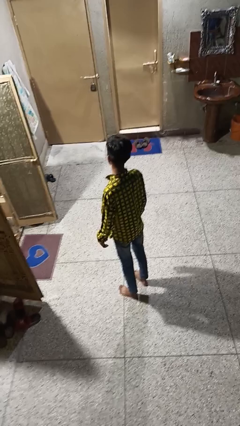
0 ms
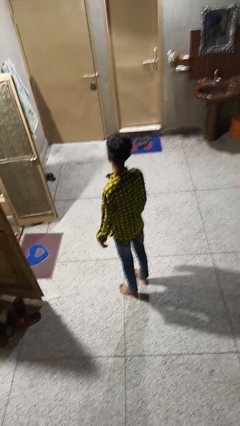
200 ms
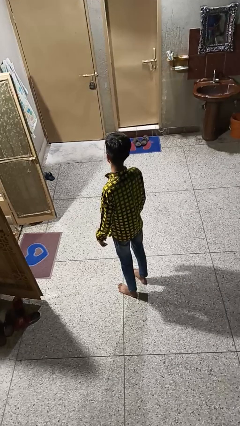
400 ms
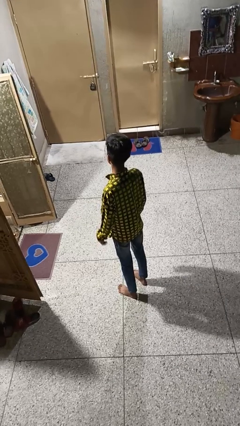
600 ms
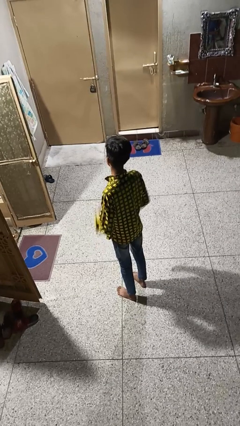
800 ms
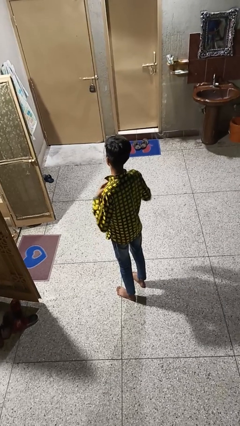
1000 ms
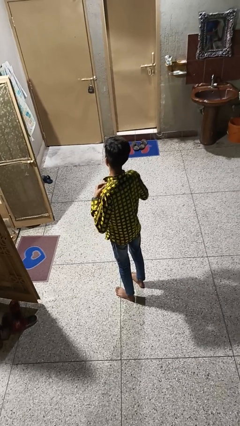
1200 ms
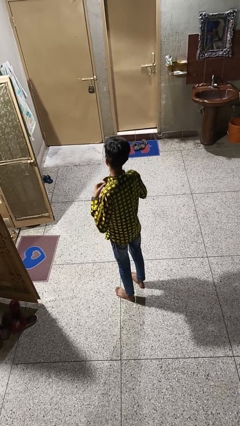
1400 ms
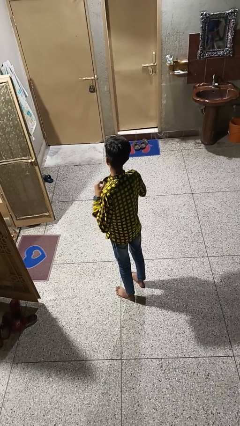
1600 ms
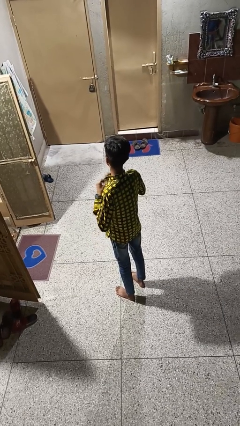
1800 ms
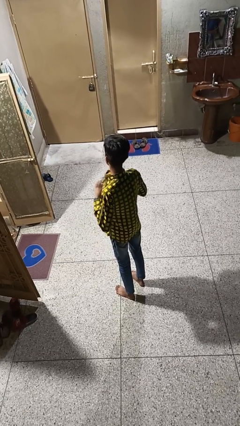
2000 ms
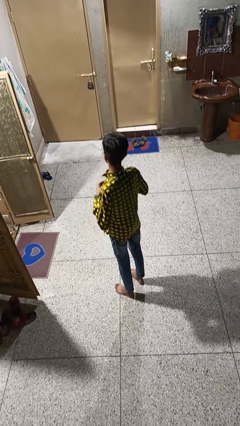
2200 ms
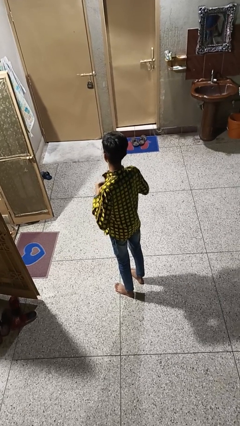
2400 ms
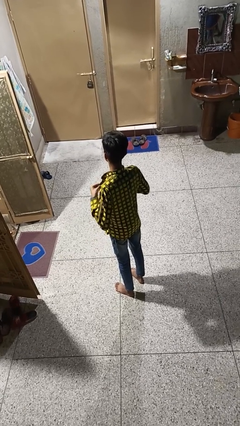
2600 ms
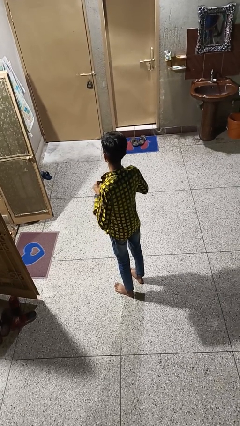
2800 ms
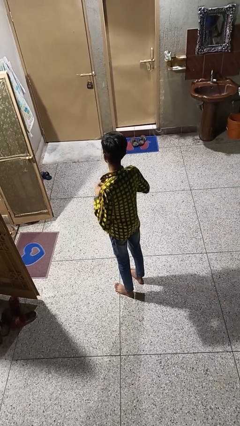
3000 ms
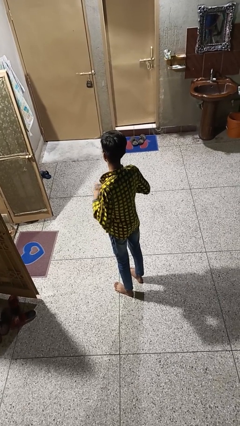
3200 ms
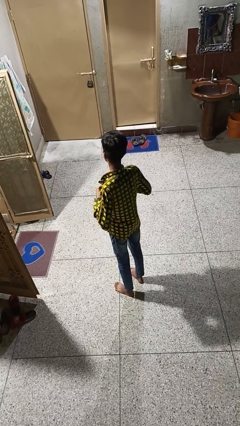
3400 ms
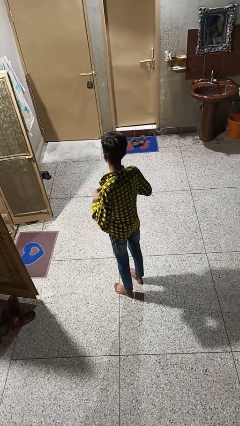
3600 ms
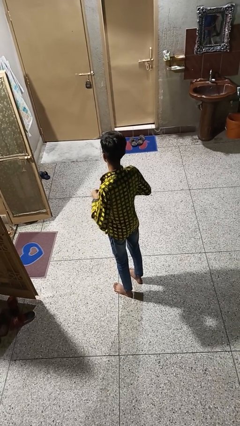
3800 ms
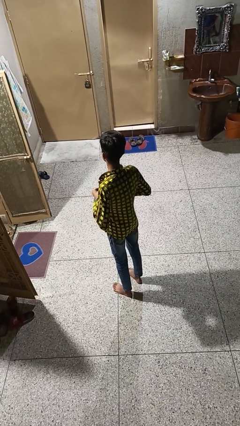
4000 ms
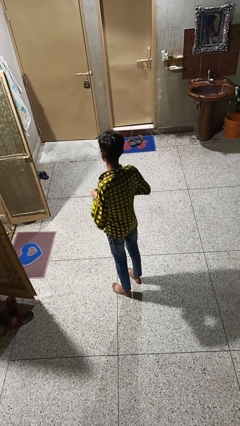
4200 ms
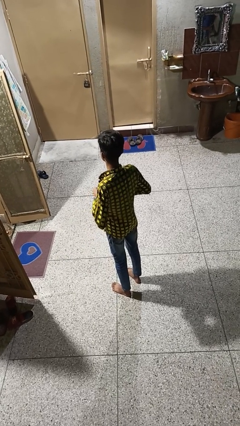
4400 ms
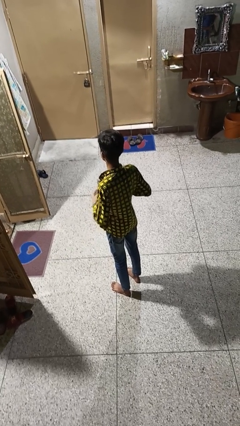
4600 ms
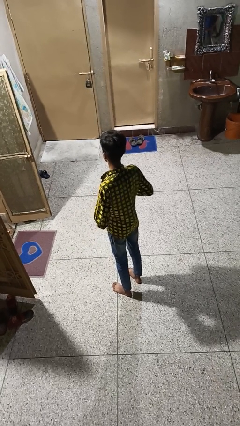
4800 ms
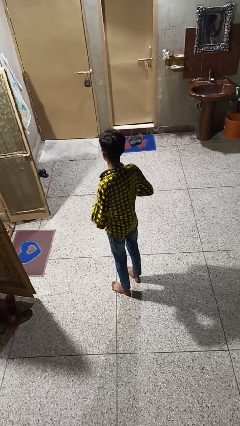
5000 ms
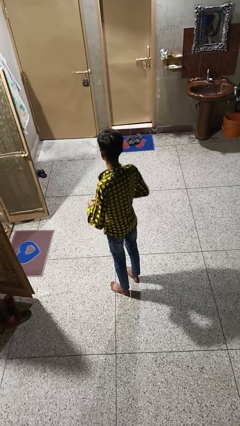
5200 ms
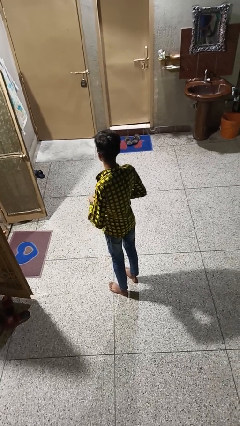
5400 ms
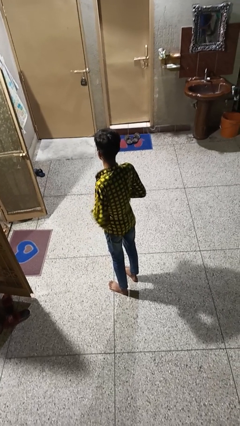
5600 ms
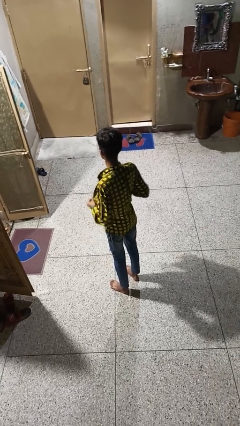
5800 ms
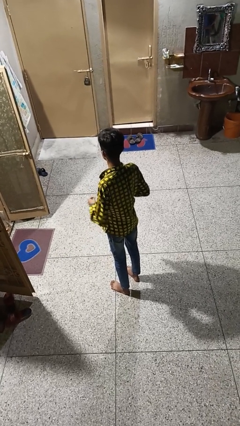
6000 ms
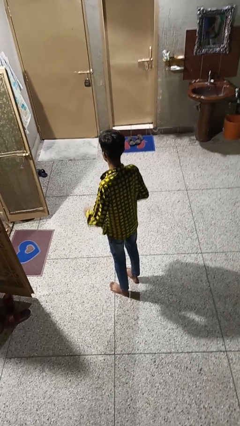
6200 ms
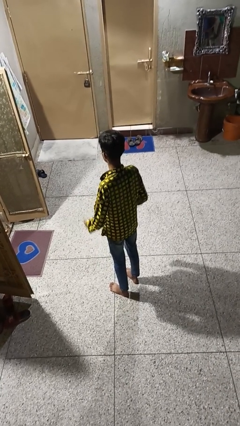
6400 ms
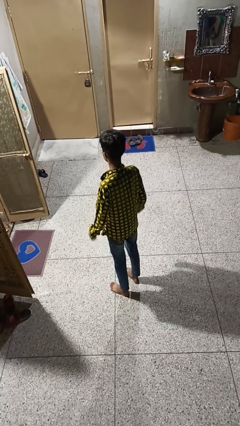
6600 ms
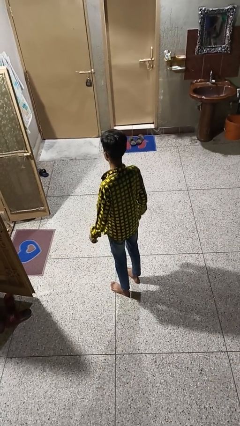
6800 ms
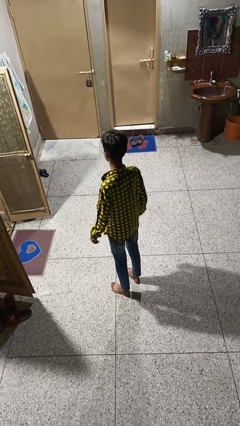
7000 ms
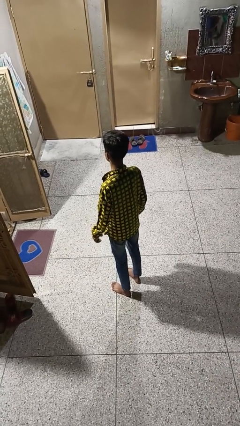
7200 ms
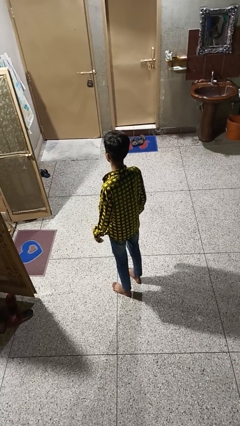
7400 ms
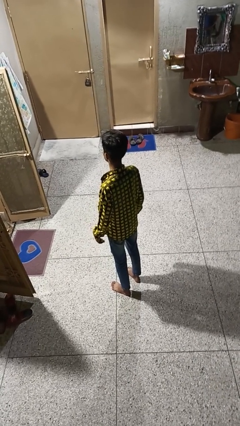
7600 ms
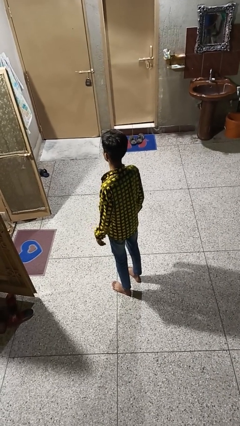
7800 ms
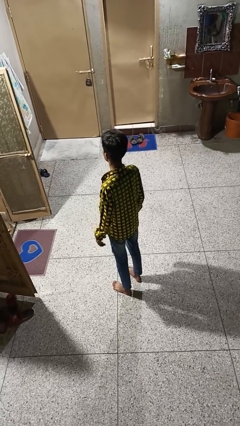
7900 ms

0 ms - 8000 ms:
person unbuttons shirt

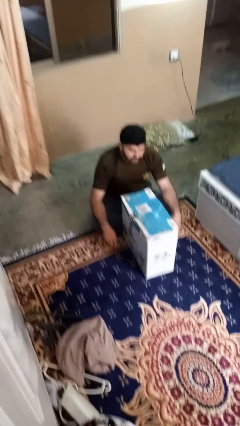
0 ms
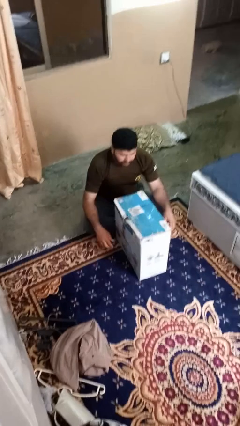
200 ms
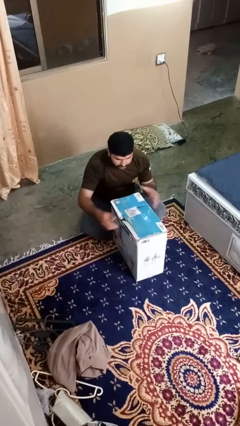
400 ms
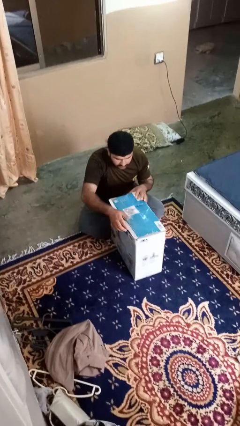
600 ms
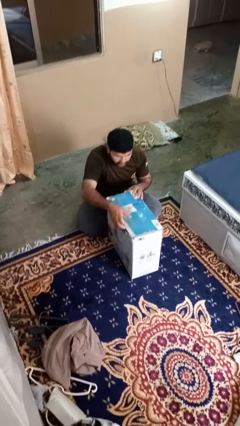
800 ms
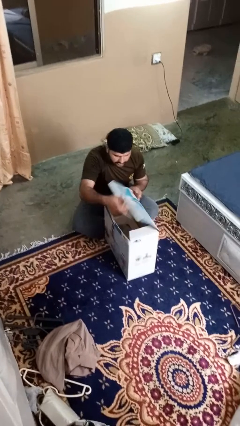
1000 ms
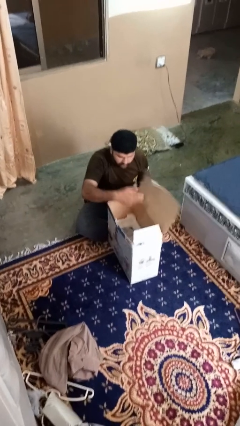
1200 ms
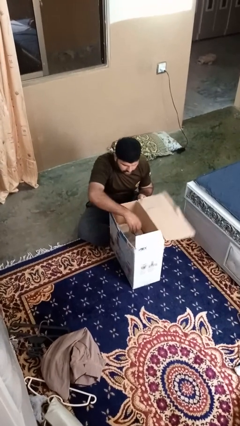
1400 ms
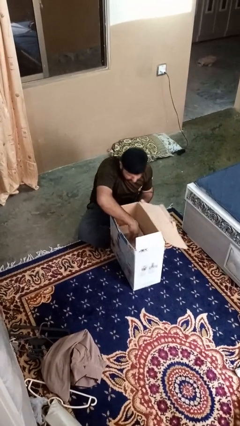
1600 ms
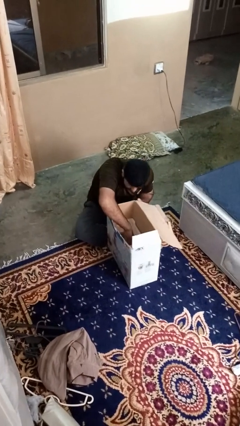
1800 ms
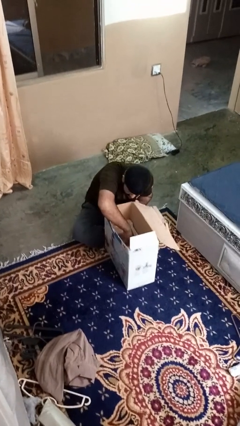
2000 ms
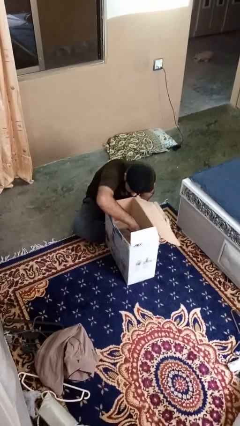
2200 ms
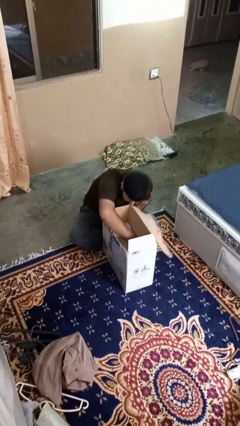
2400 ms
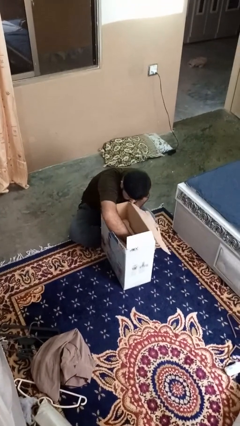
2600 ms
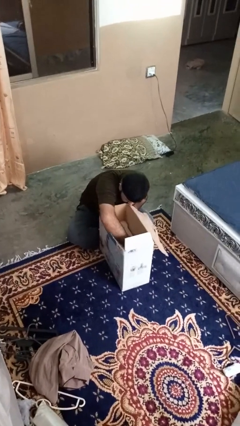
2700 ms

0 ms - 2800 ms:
person searches in box

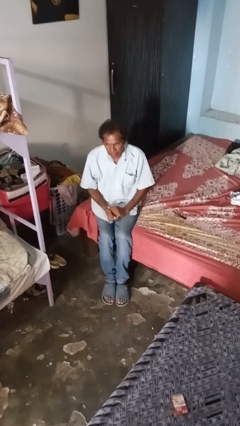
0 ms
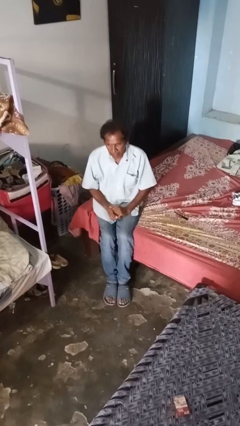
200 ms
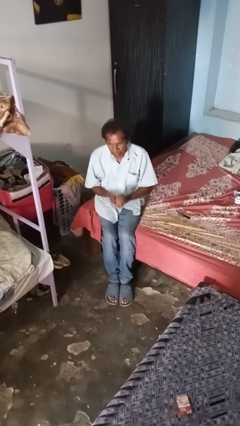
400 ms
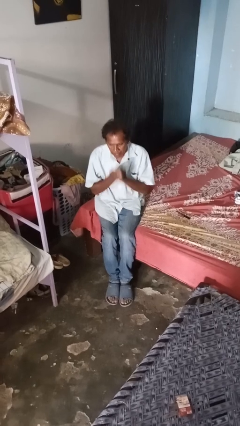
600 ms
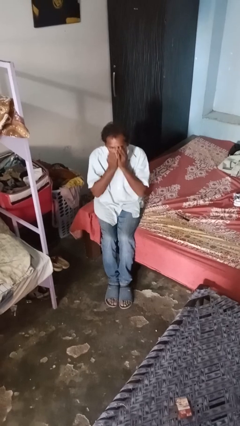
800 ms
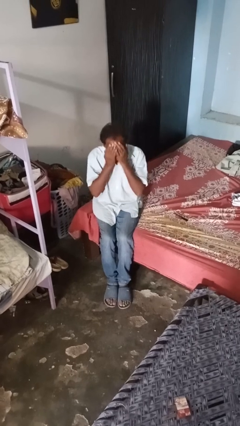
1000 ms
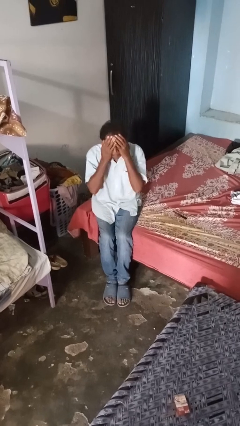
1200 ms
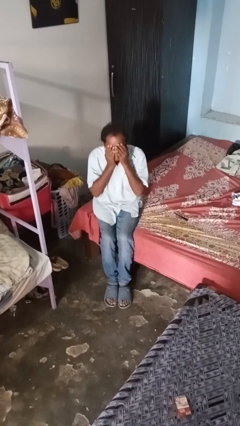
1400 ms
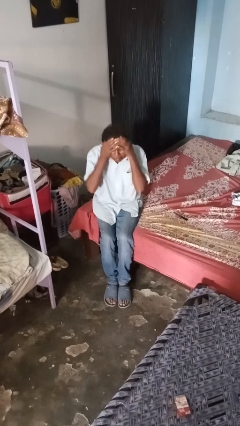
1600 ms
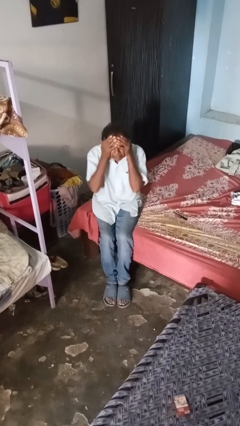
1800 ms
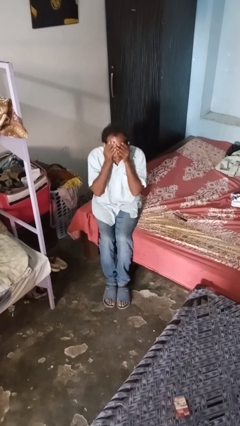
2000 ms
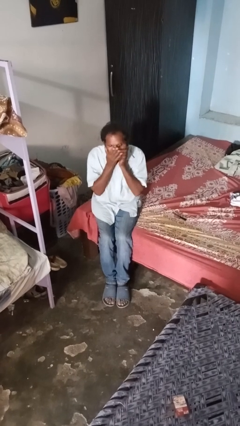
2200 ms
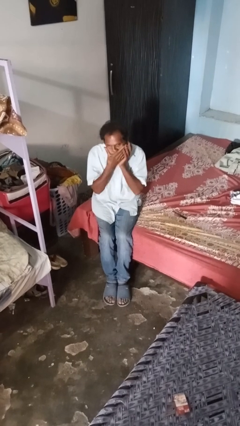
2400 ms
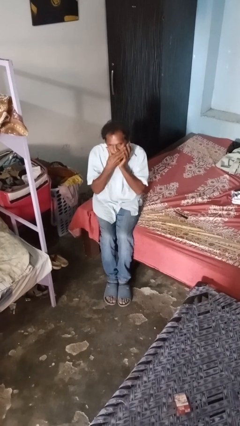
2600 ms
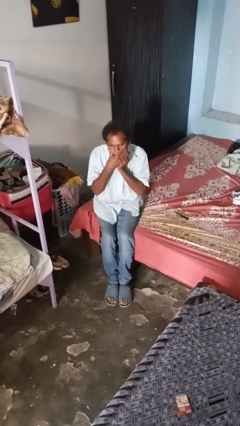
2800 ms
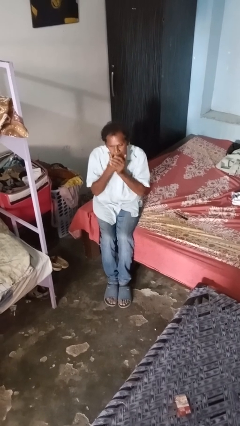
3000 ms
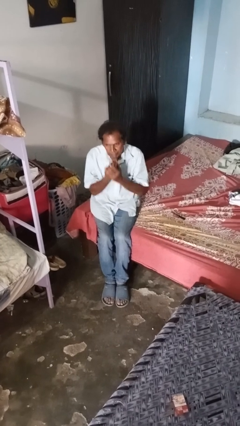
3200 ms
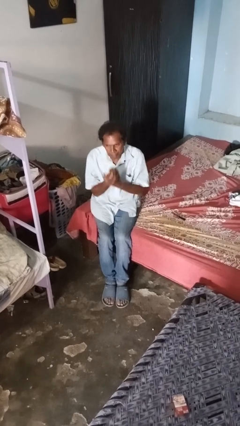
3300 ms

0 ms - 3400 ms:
person applies foundation makeup

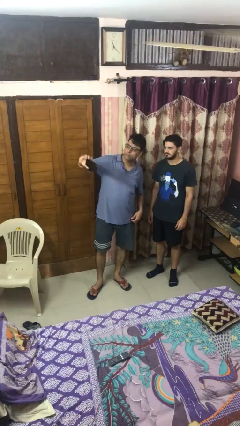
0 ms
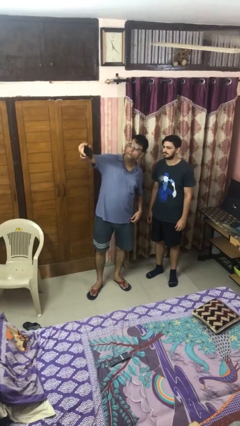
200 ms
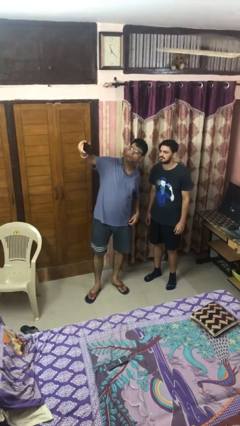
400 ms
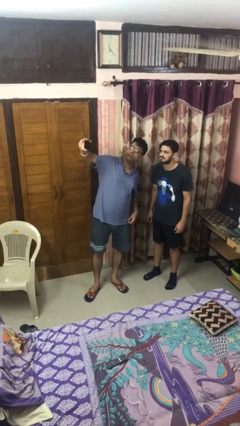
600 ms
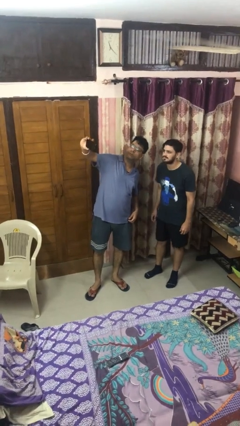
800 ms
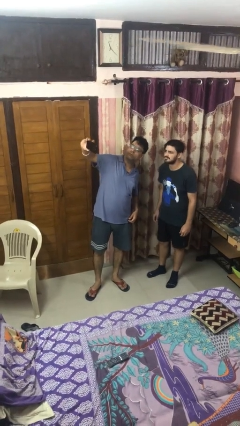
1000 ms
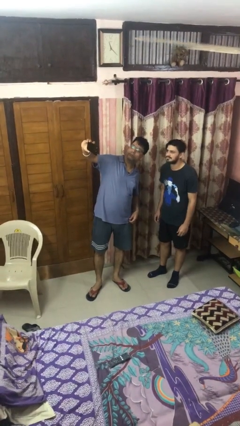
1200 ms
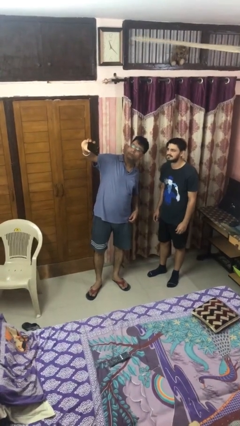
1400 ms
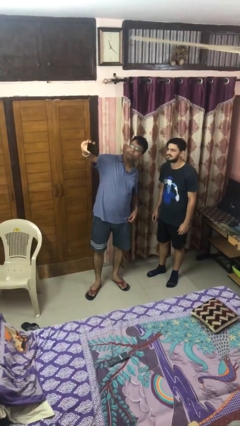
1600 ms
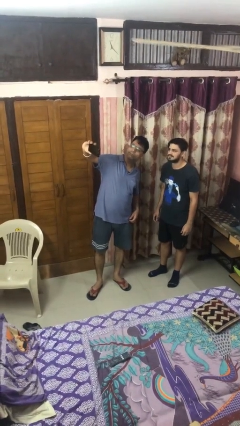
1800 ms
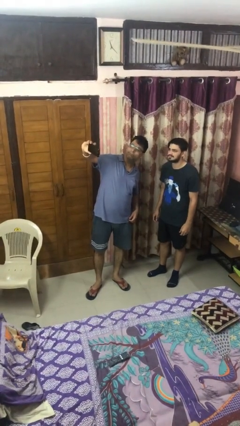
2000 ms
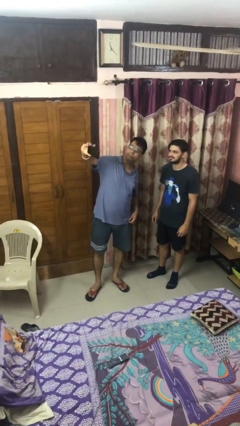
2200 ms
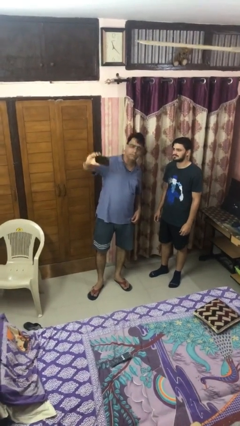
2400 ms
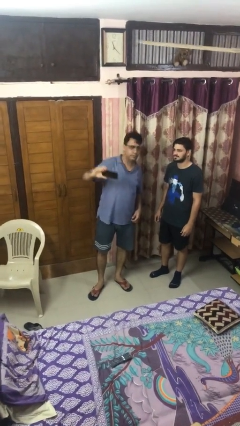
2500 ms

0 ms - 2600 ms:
person takes selfie with person

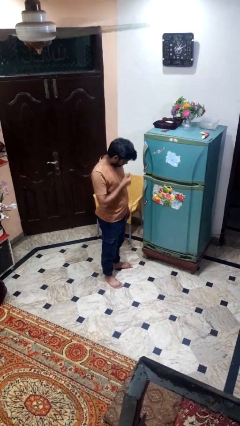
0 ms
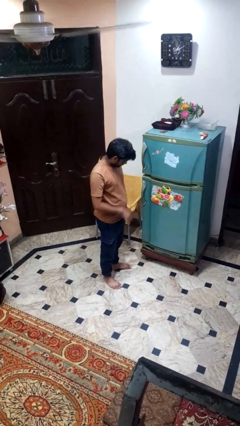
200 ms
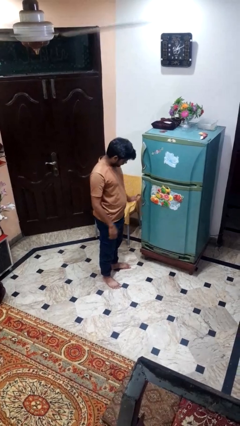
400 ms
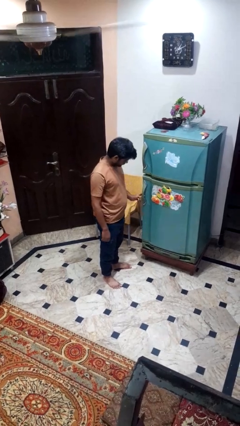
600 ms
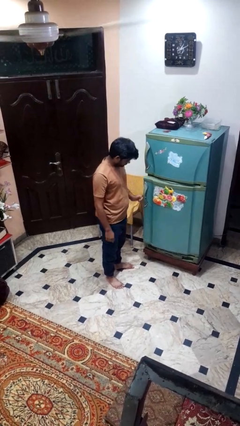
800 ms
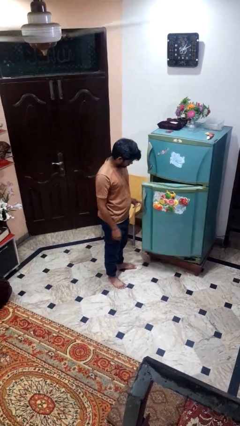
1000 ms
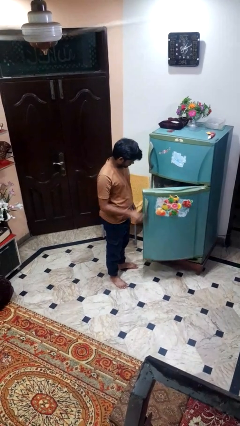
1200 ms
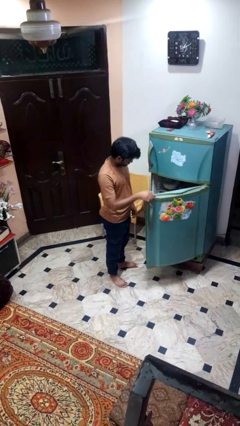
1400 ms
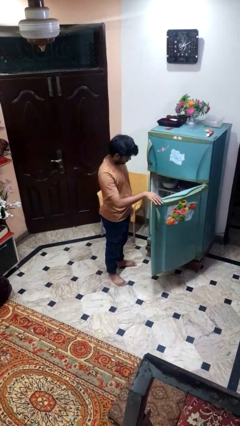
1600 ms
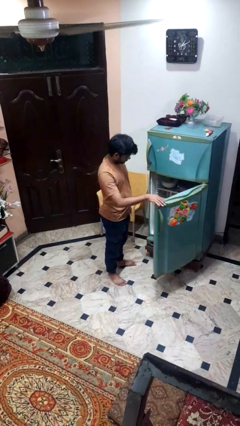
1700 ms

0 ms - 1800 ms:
person opens refrigerator
